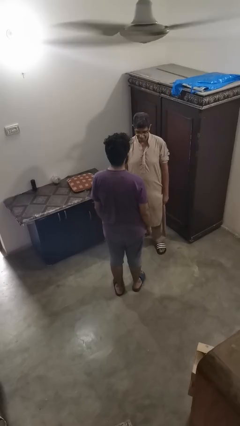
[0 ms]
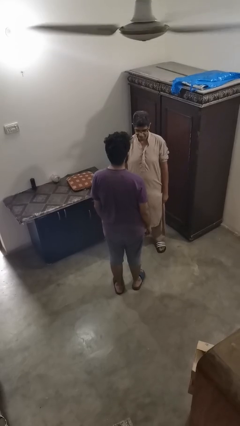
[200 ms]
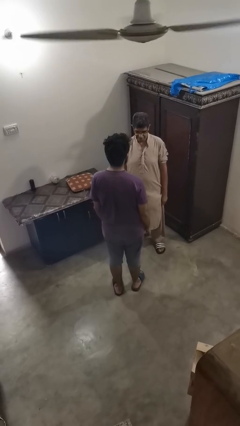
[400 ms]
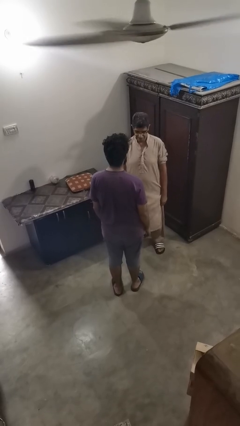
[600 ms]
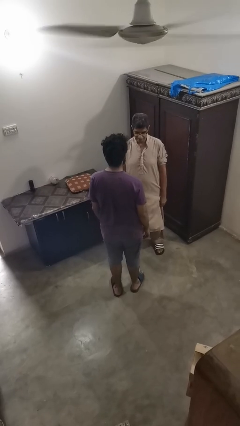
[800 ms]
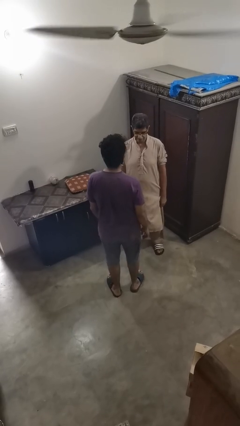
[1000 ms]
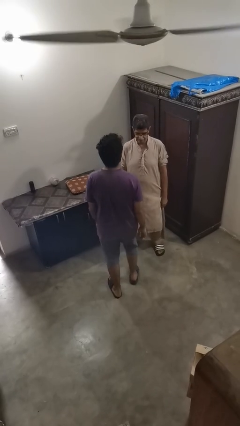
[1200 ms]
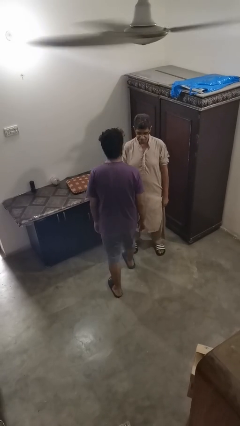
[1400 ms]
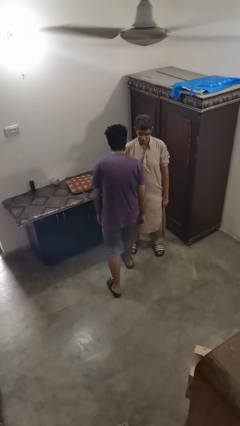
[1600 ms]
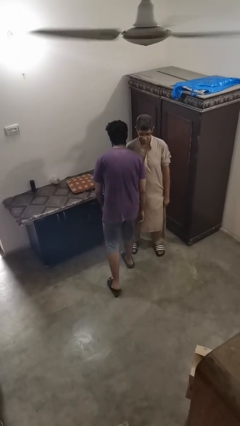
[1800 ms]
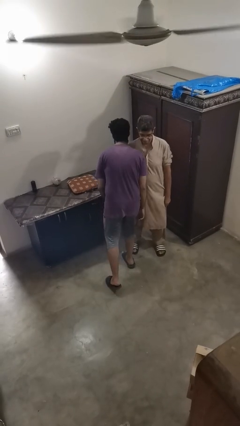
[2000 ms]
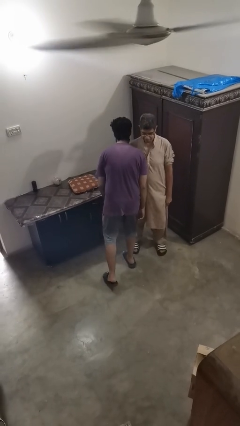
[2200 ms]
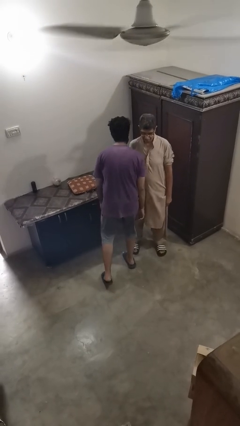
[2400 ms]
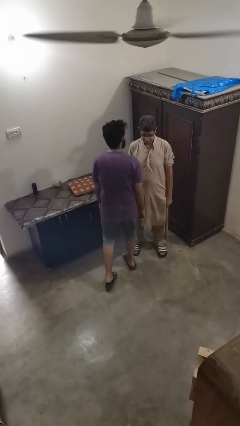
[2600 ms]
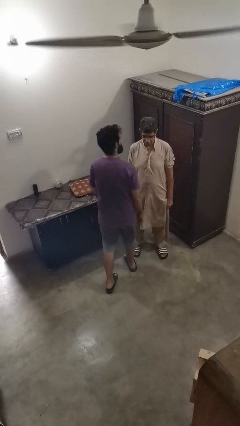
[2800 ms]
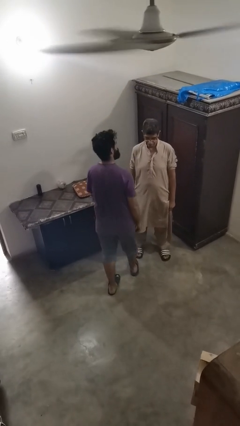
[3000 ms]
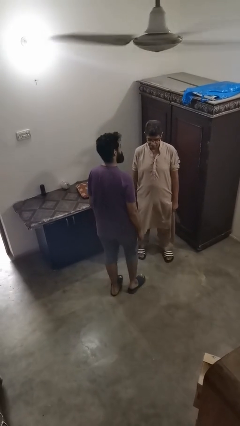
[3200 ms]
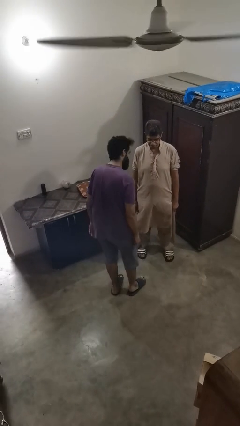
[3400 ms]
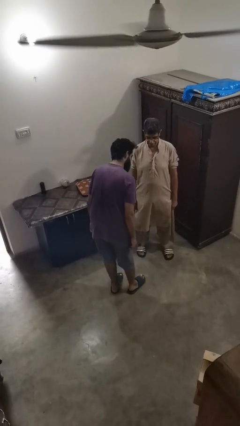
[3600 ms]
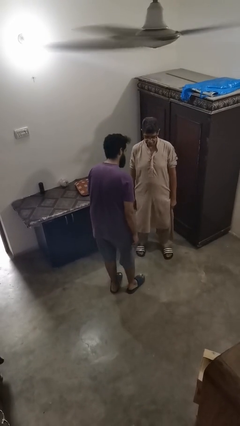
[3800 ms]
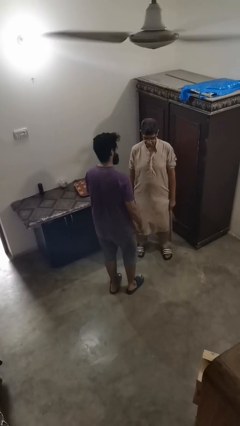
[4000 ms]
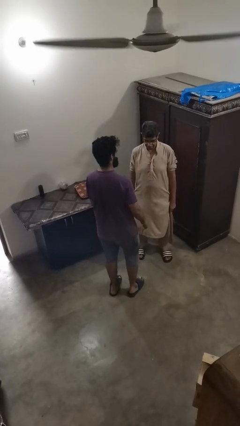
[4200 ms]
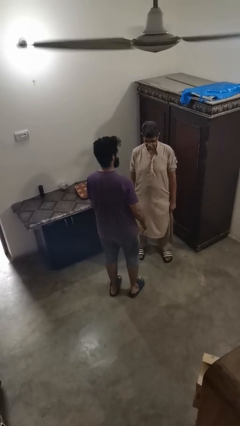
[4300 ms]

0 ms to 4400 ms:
person bumps into person

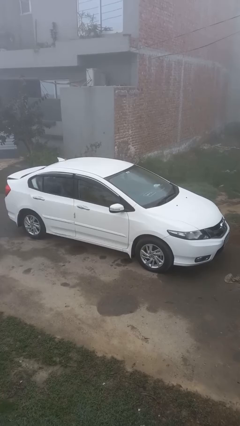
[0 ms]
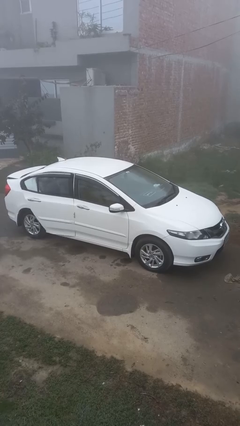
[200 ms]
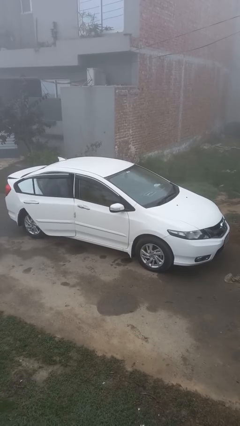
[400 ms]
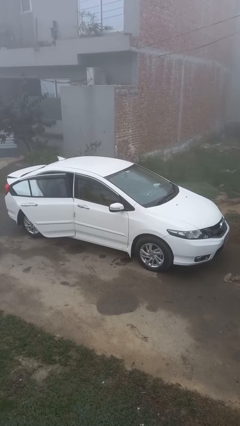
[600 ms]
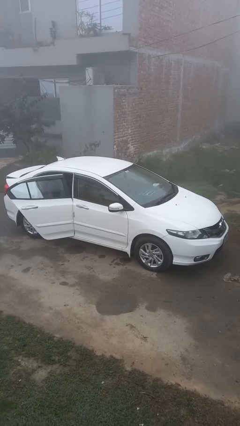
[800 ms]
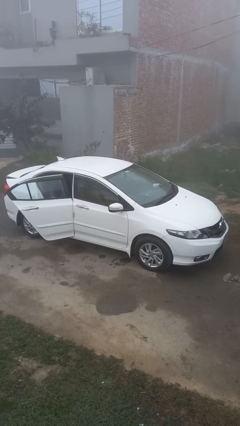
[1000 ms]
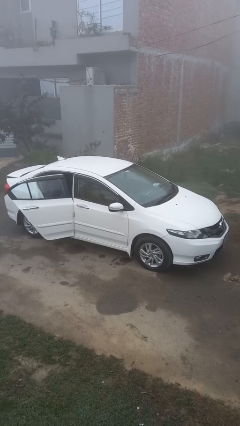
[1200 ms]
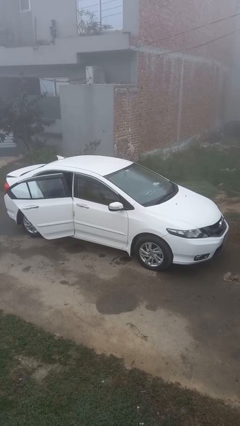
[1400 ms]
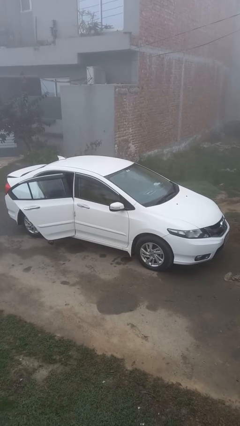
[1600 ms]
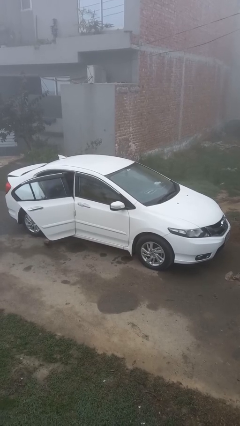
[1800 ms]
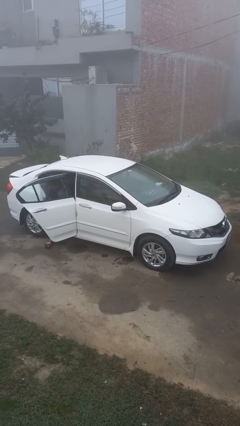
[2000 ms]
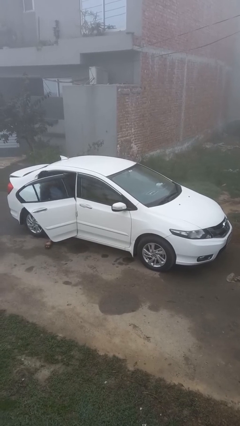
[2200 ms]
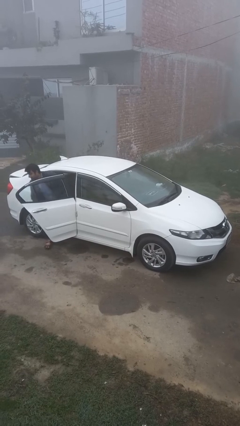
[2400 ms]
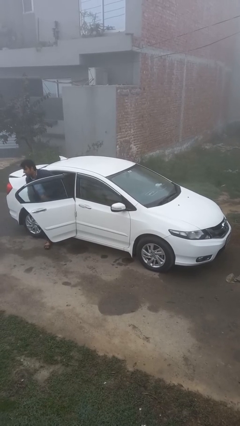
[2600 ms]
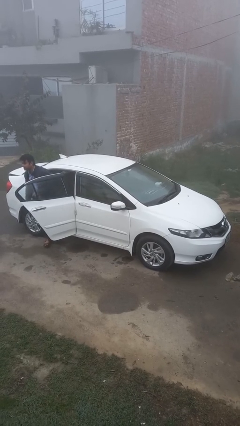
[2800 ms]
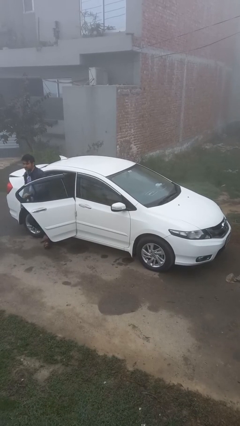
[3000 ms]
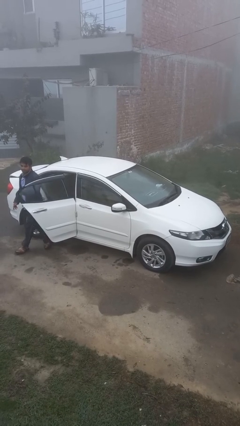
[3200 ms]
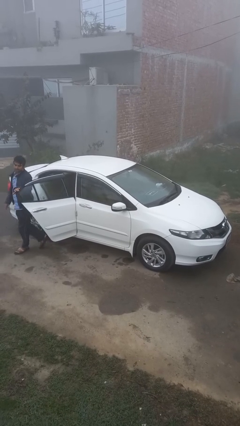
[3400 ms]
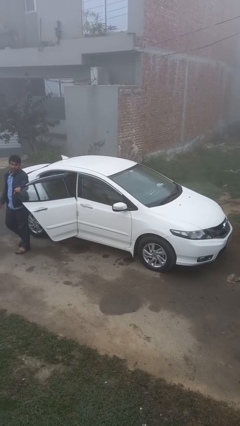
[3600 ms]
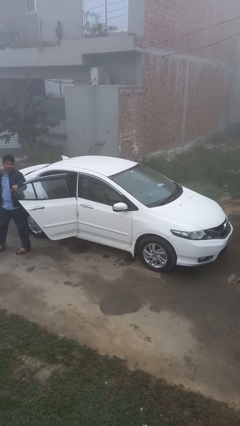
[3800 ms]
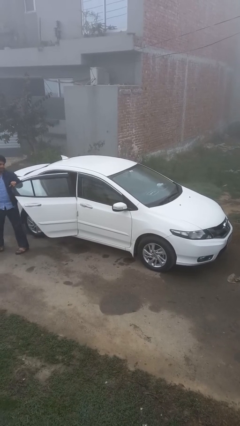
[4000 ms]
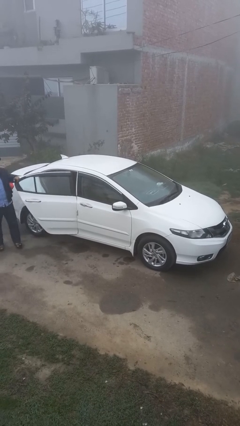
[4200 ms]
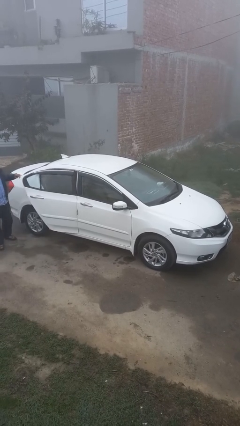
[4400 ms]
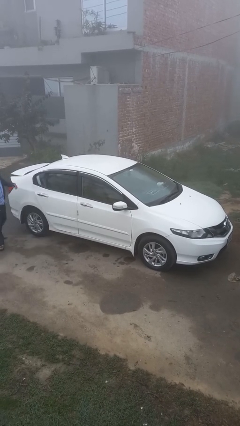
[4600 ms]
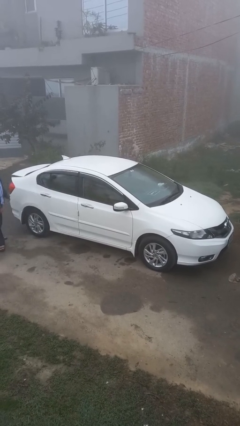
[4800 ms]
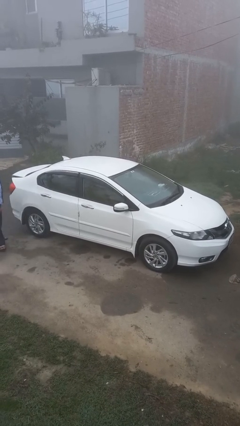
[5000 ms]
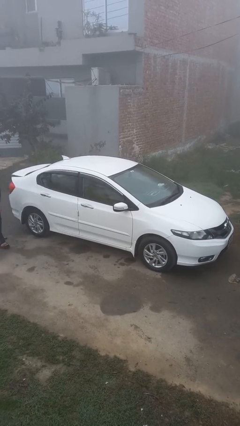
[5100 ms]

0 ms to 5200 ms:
car drops off person

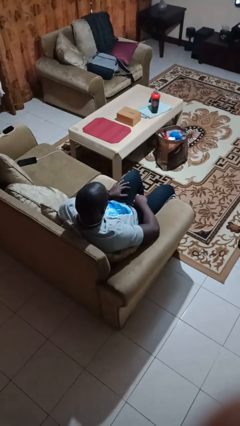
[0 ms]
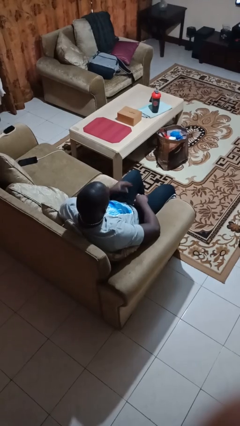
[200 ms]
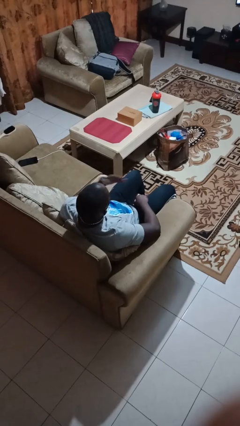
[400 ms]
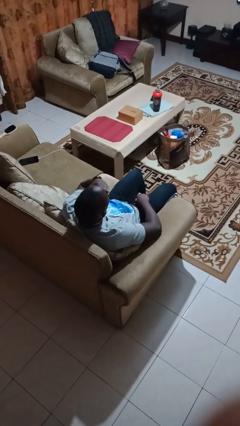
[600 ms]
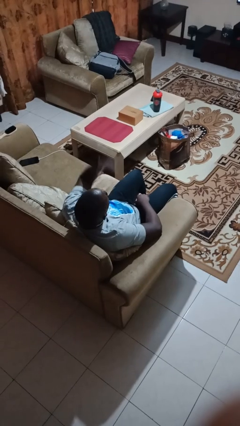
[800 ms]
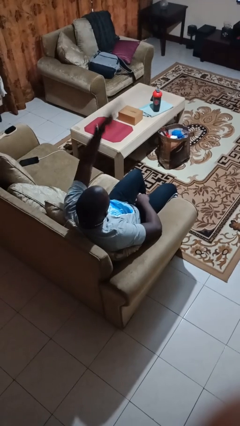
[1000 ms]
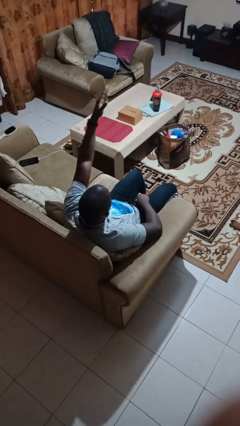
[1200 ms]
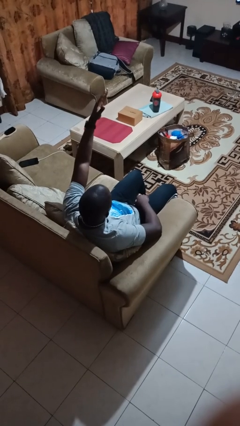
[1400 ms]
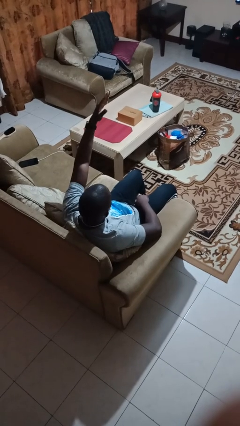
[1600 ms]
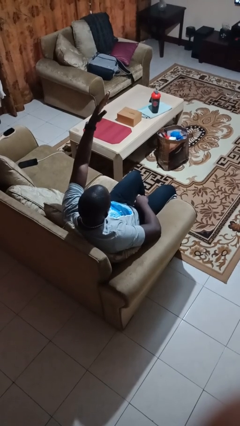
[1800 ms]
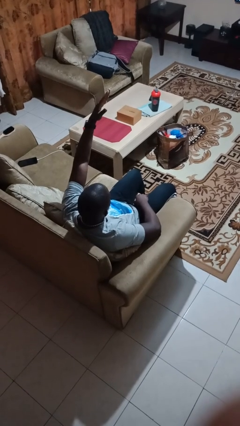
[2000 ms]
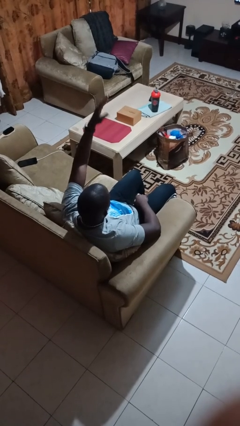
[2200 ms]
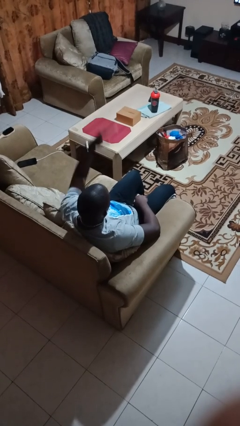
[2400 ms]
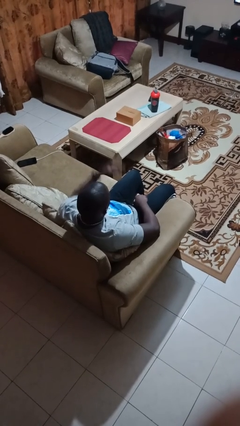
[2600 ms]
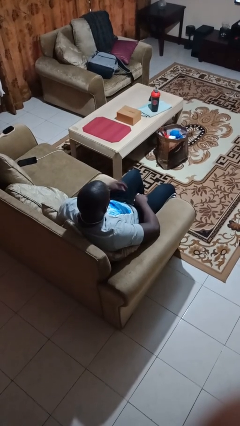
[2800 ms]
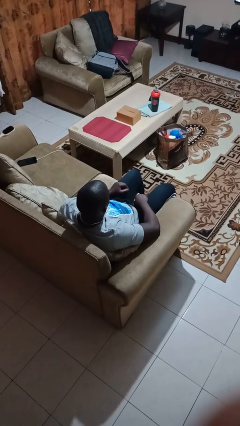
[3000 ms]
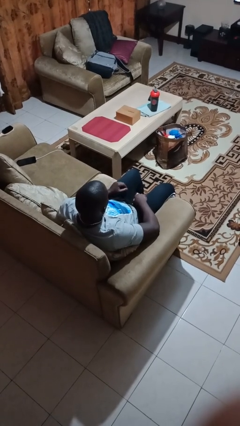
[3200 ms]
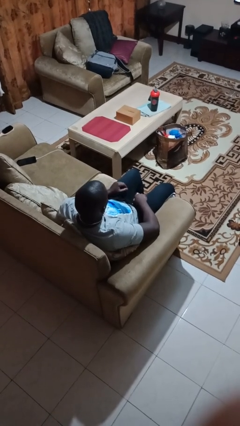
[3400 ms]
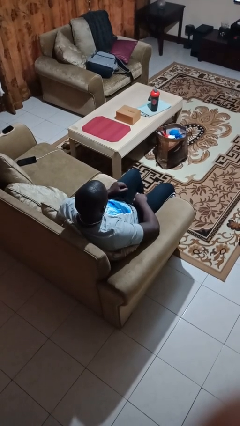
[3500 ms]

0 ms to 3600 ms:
person gestures blow kiss

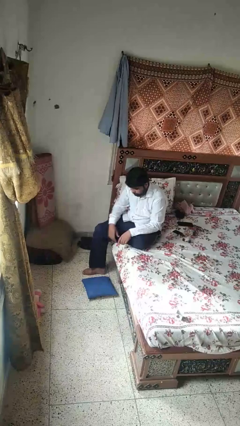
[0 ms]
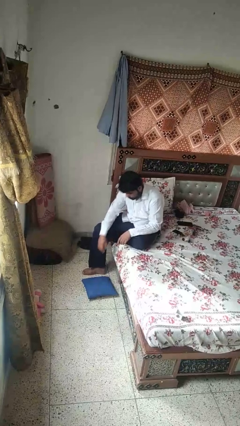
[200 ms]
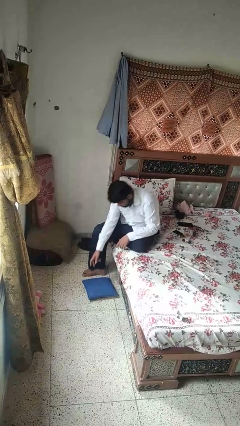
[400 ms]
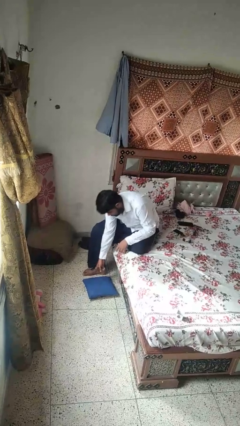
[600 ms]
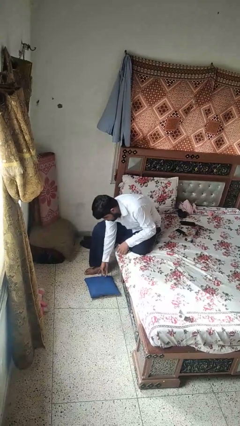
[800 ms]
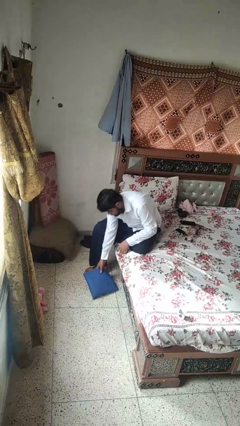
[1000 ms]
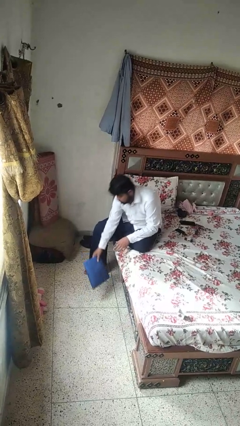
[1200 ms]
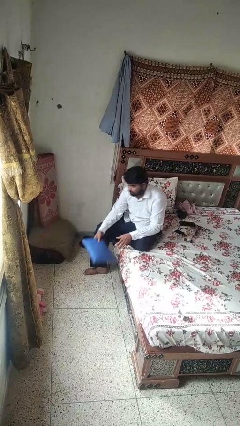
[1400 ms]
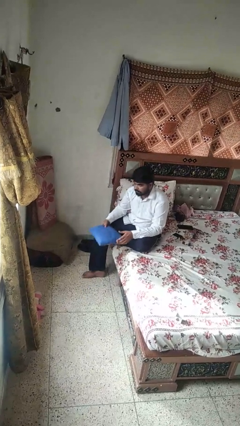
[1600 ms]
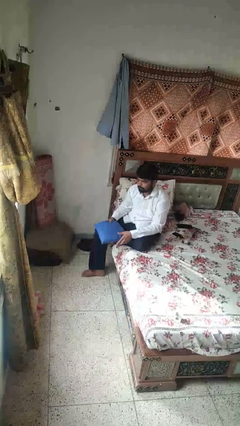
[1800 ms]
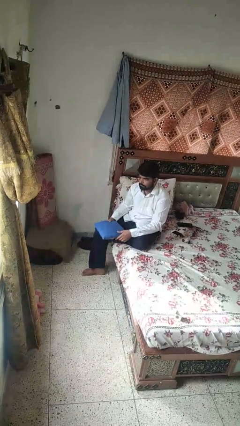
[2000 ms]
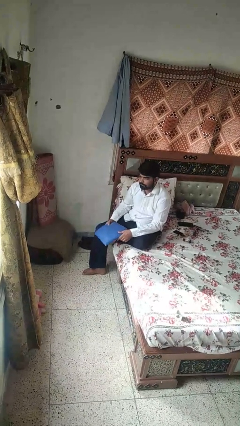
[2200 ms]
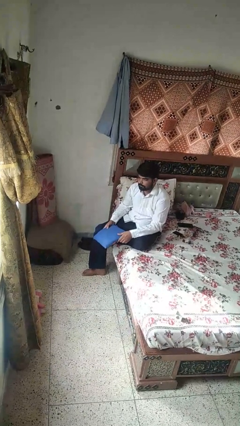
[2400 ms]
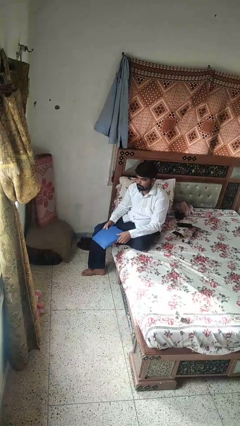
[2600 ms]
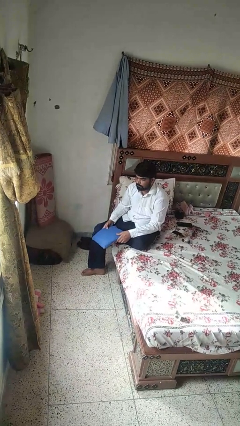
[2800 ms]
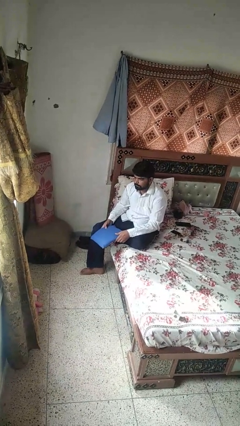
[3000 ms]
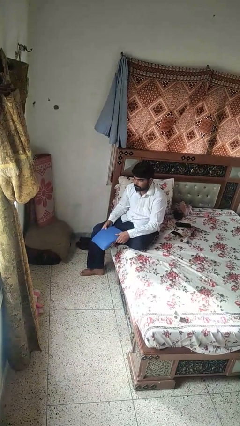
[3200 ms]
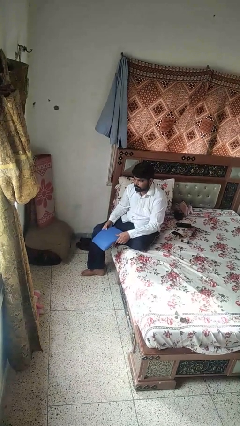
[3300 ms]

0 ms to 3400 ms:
person picks up object from floor

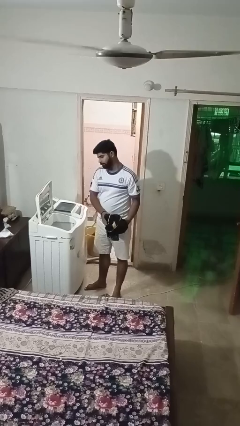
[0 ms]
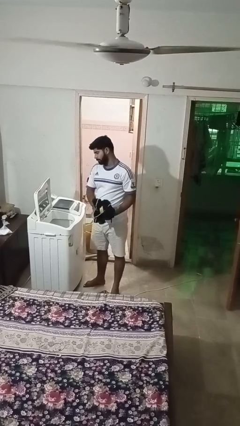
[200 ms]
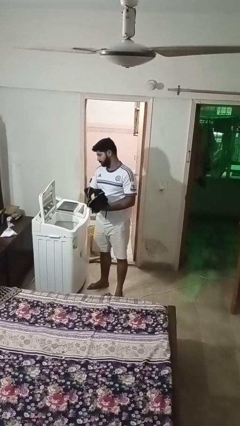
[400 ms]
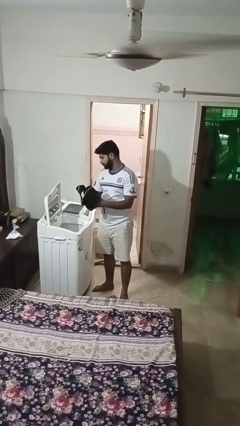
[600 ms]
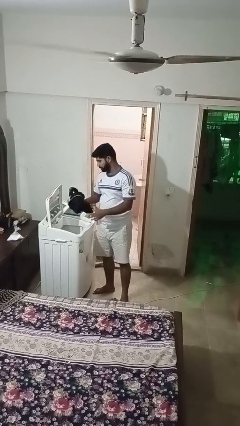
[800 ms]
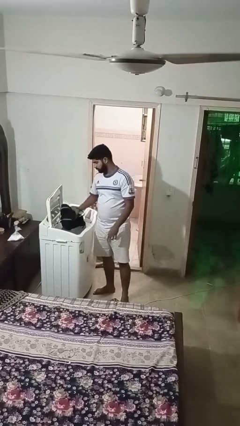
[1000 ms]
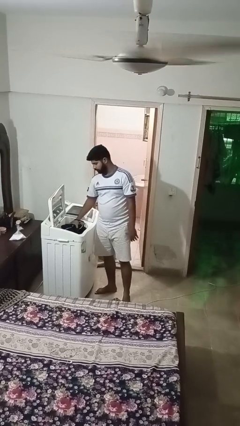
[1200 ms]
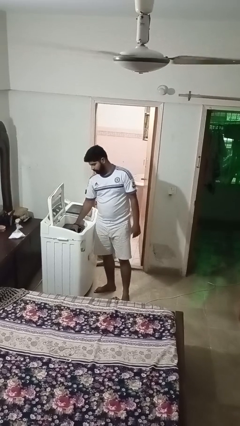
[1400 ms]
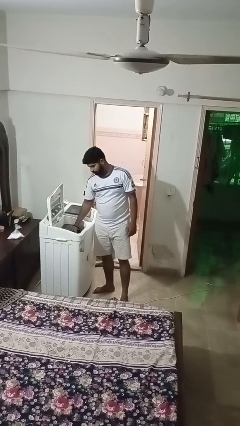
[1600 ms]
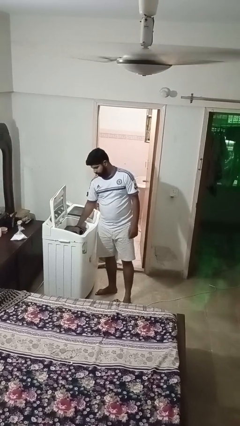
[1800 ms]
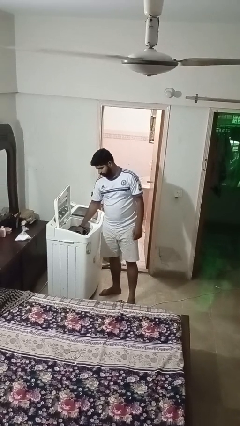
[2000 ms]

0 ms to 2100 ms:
person loads clotheswasher
